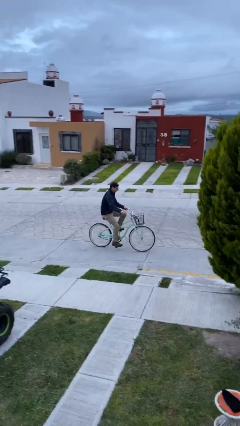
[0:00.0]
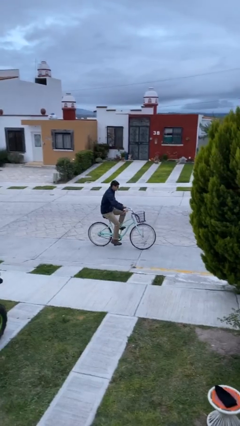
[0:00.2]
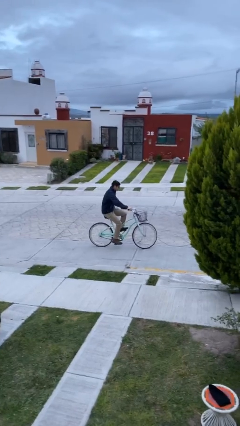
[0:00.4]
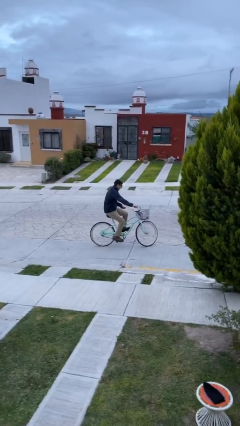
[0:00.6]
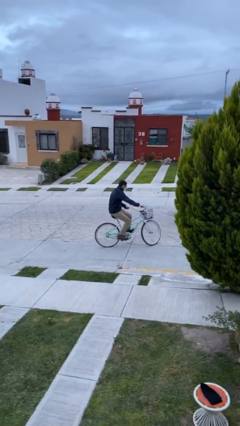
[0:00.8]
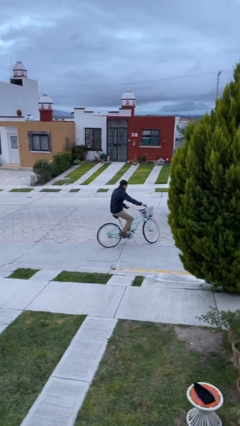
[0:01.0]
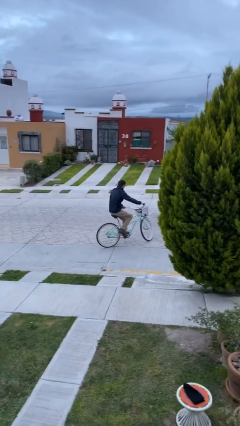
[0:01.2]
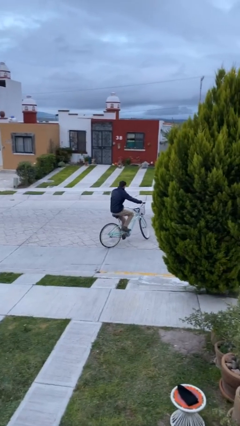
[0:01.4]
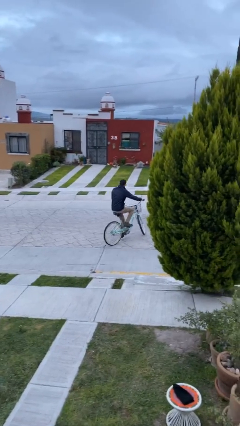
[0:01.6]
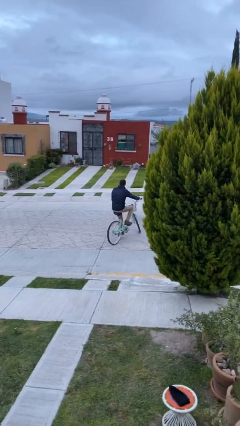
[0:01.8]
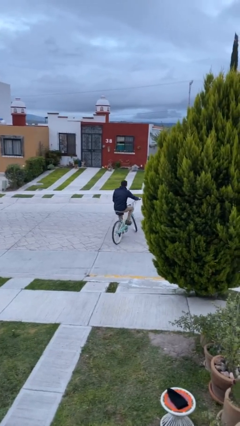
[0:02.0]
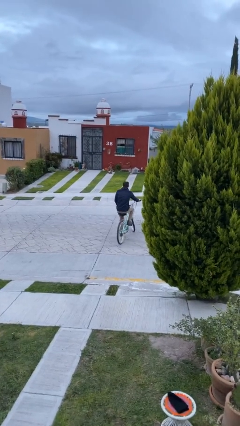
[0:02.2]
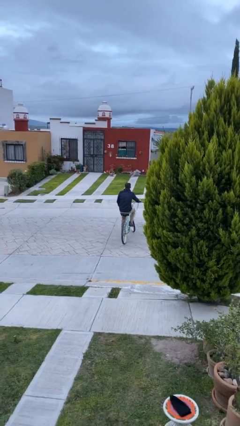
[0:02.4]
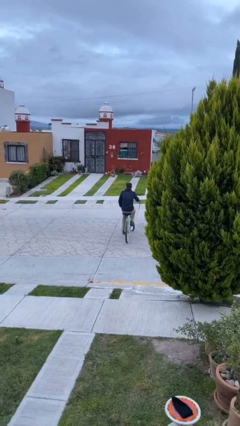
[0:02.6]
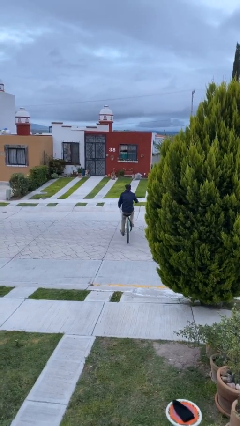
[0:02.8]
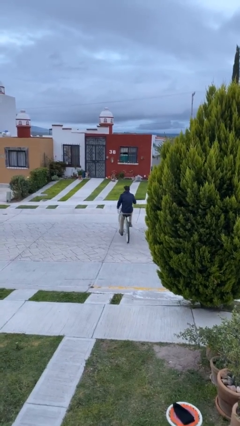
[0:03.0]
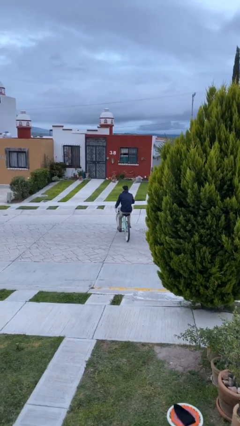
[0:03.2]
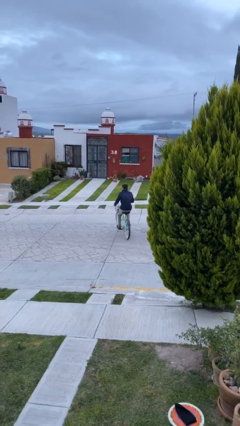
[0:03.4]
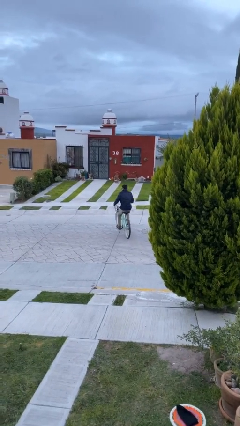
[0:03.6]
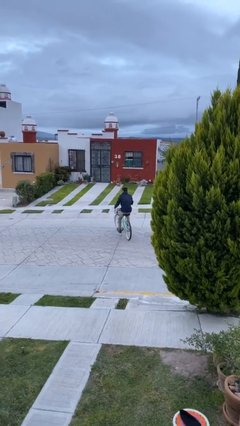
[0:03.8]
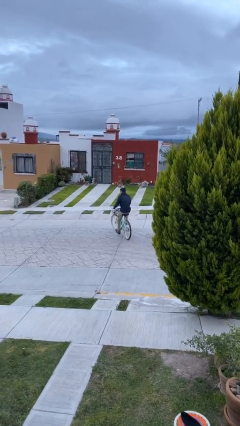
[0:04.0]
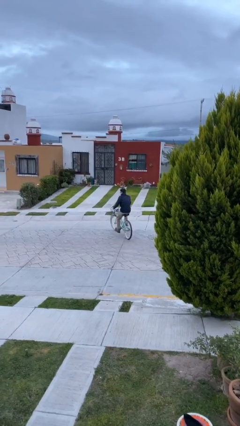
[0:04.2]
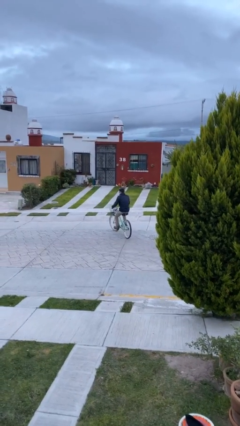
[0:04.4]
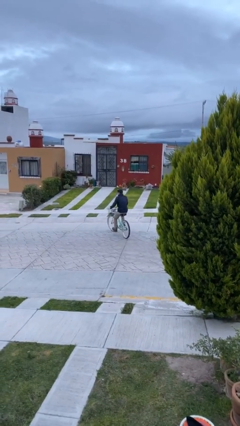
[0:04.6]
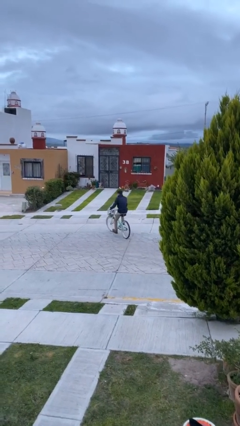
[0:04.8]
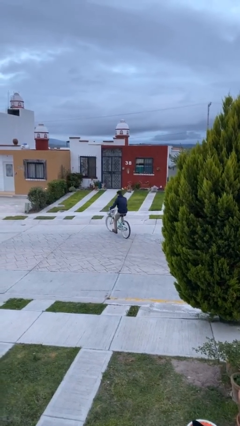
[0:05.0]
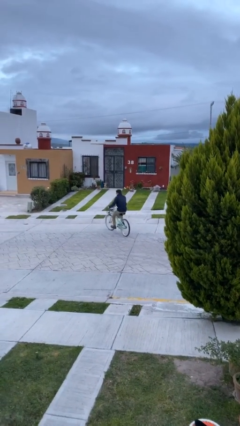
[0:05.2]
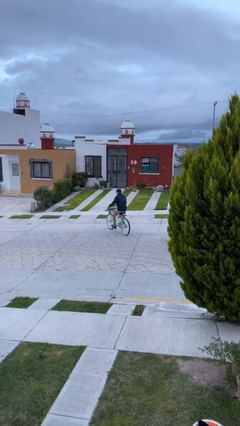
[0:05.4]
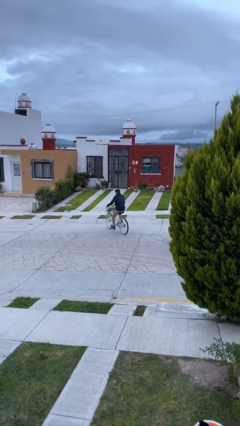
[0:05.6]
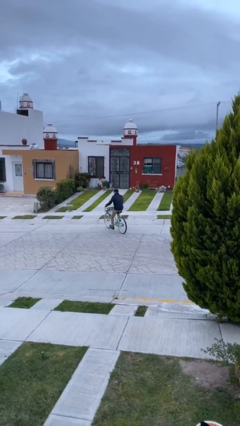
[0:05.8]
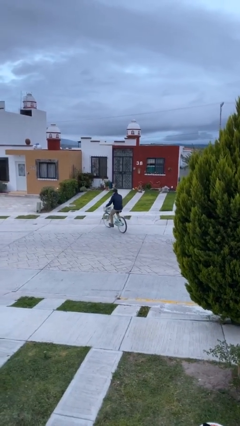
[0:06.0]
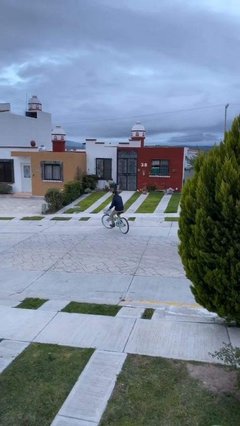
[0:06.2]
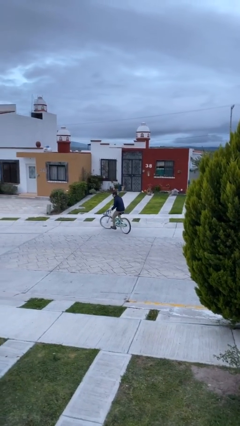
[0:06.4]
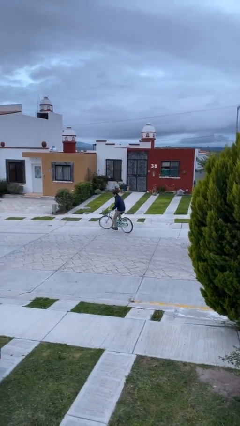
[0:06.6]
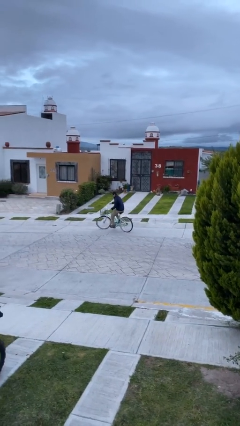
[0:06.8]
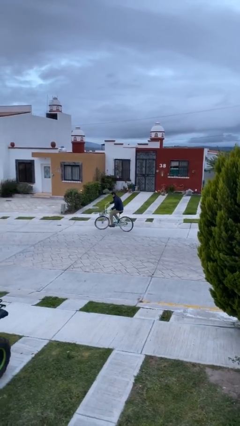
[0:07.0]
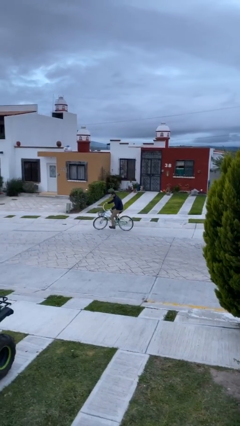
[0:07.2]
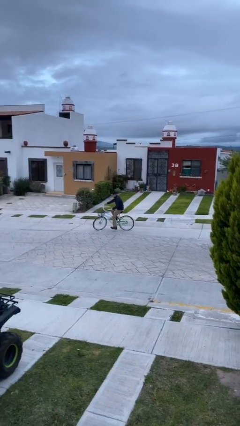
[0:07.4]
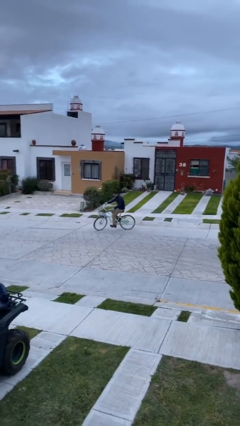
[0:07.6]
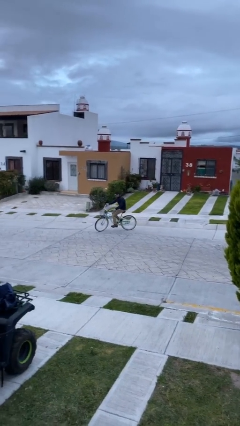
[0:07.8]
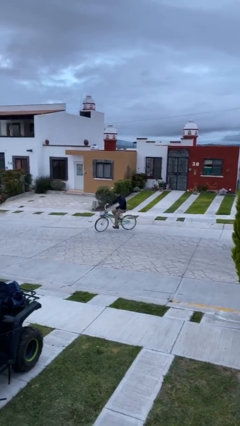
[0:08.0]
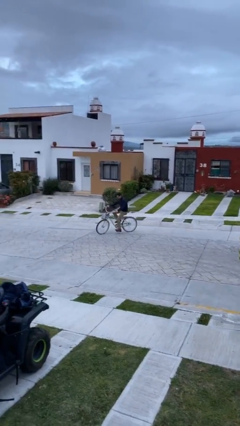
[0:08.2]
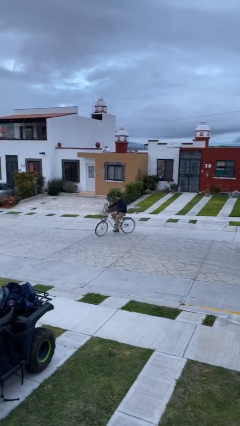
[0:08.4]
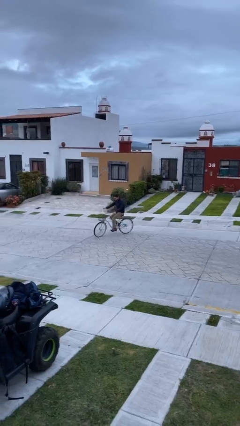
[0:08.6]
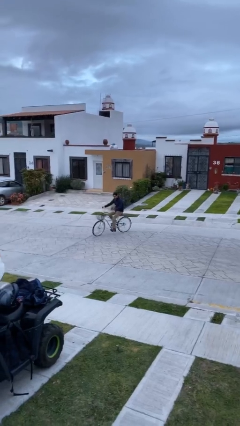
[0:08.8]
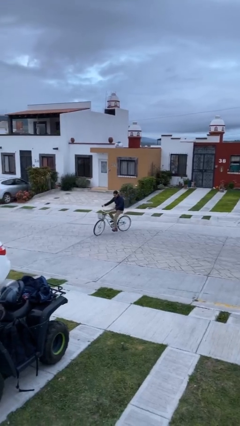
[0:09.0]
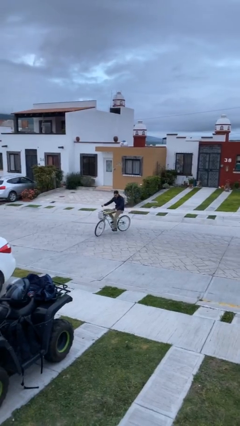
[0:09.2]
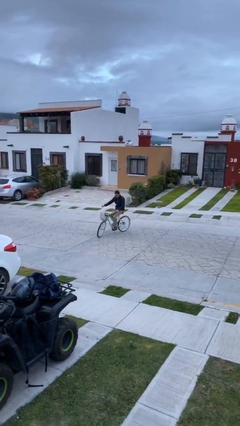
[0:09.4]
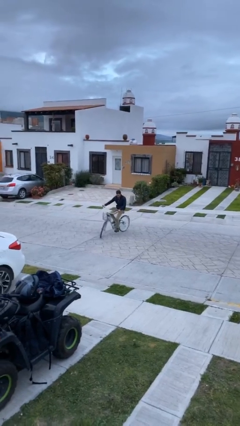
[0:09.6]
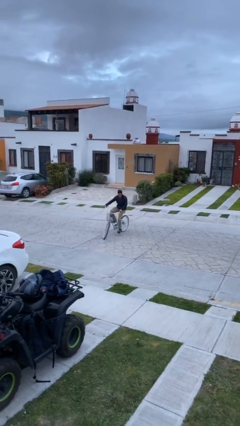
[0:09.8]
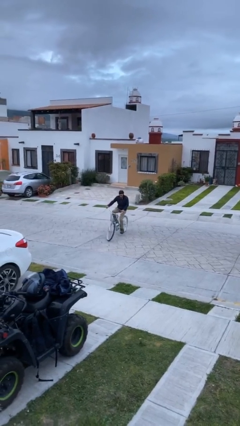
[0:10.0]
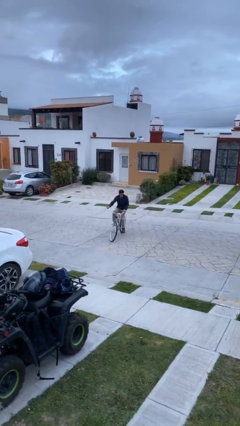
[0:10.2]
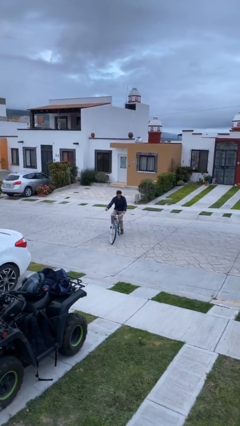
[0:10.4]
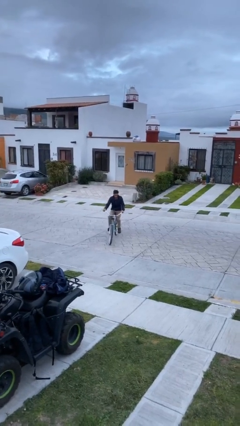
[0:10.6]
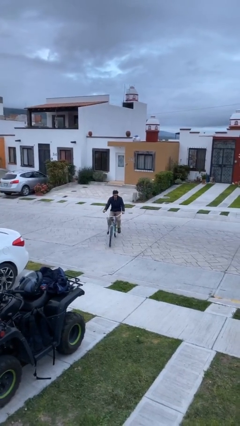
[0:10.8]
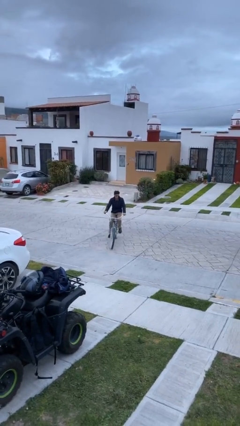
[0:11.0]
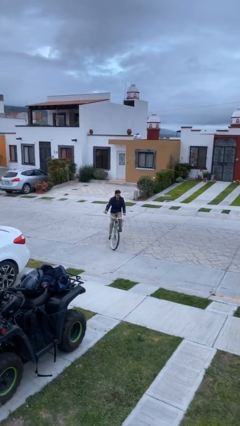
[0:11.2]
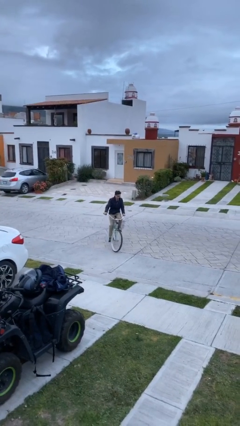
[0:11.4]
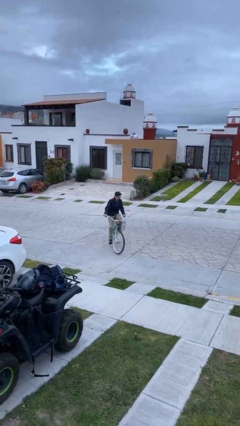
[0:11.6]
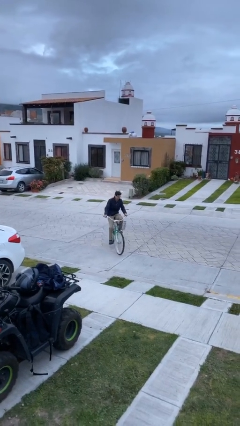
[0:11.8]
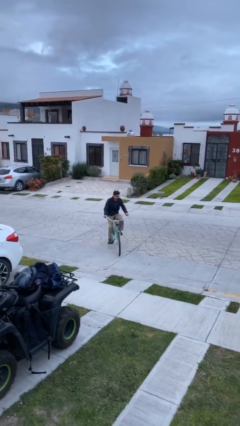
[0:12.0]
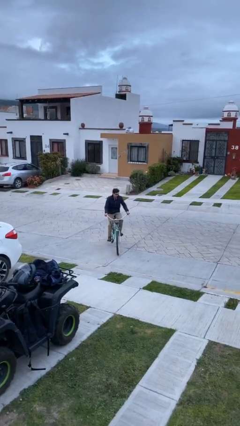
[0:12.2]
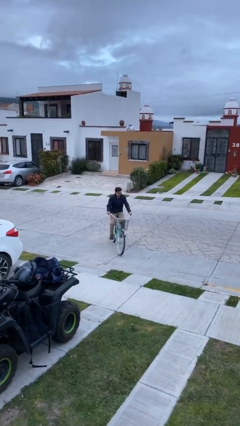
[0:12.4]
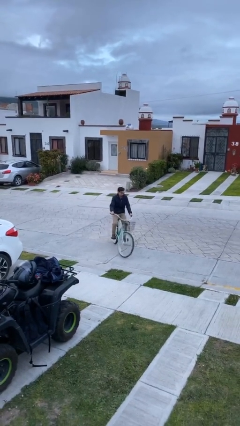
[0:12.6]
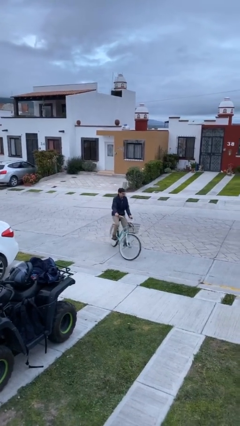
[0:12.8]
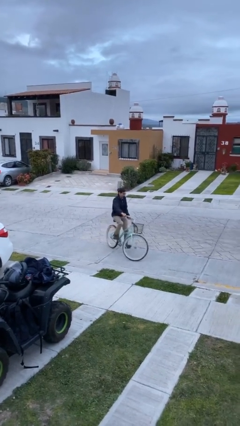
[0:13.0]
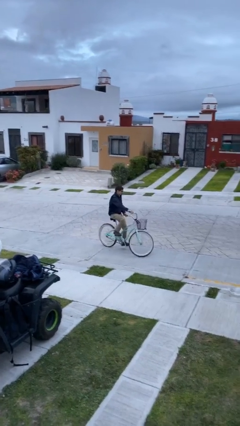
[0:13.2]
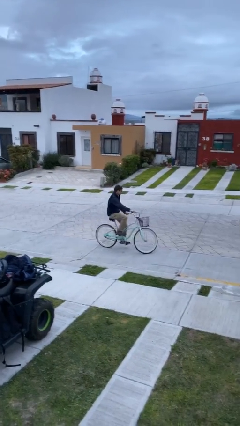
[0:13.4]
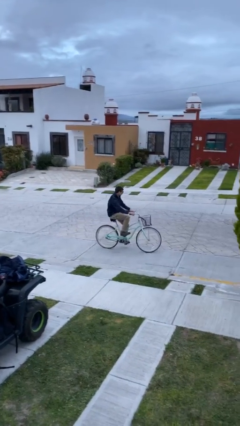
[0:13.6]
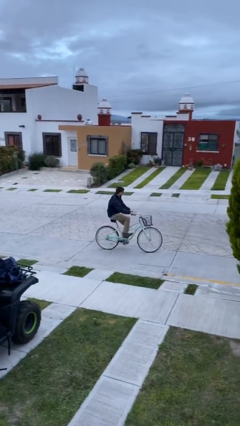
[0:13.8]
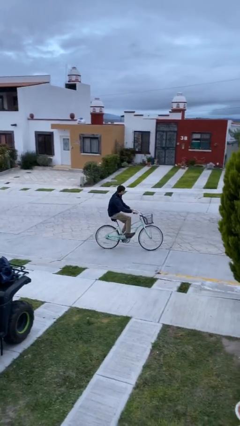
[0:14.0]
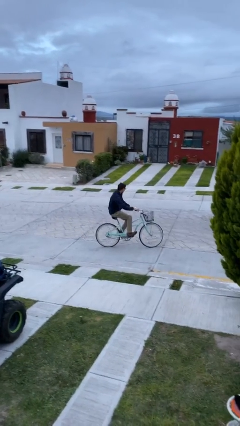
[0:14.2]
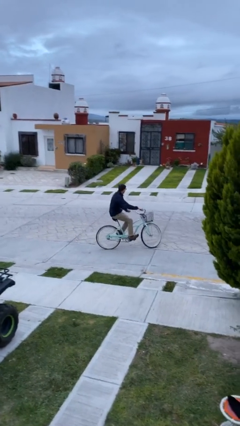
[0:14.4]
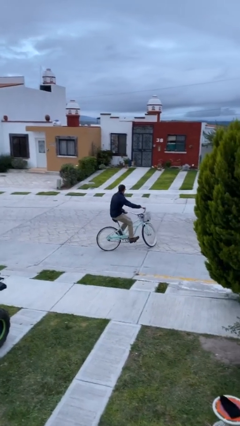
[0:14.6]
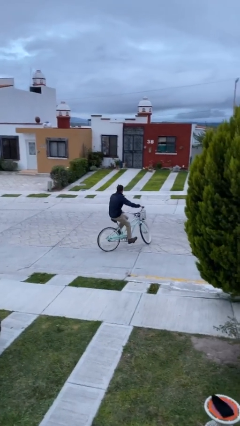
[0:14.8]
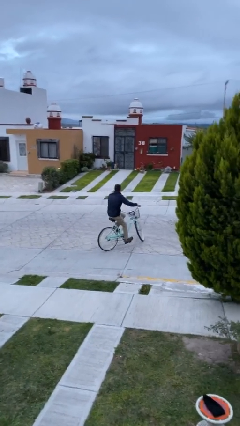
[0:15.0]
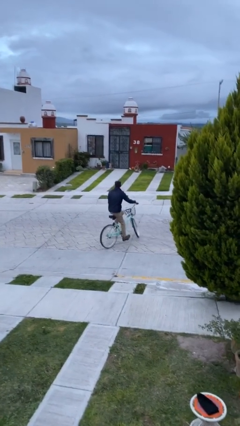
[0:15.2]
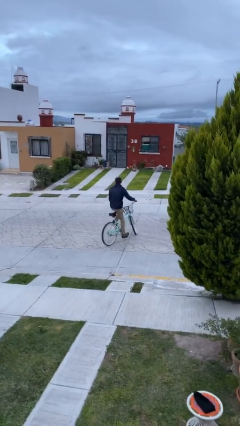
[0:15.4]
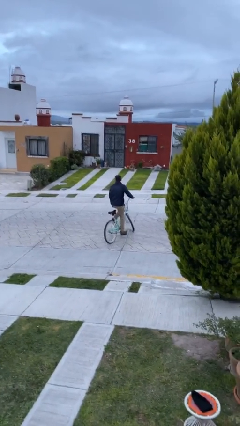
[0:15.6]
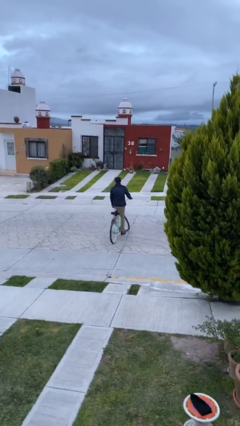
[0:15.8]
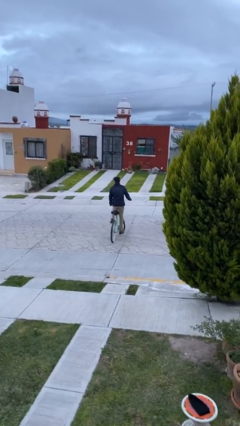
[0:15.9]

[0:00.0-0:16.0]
person rides bicycle

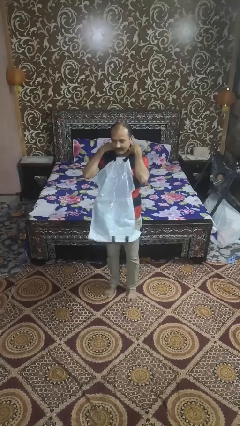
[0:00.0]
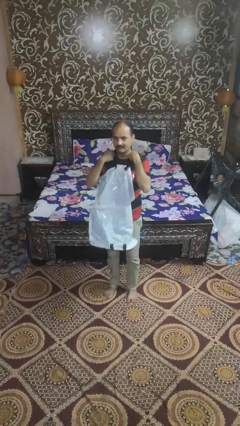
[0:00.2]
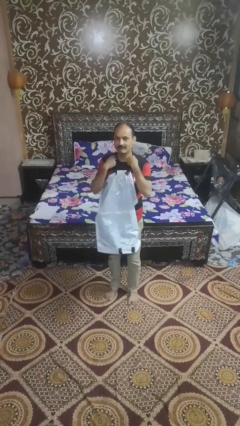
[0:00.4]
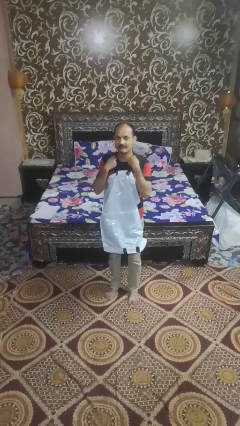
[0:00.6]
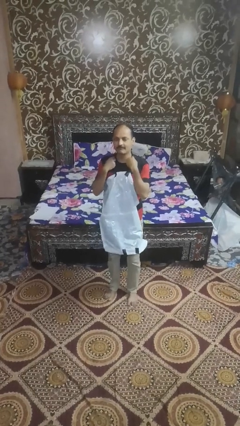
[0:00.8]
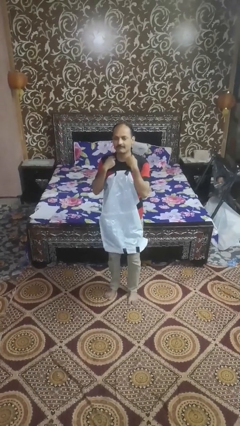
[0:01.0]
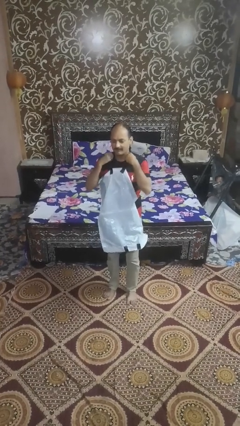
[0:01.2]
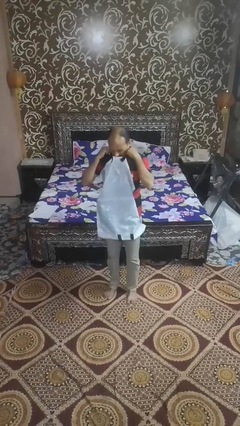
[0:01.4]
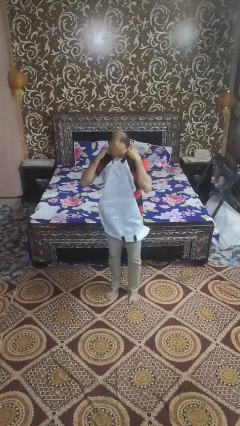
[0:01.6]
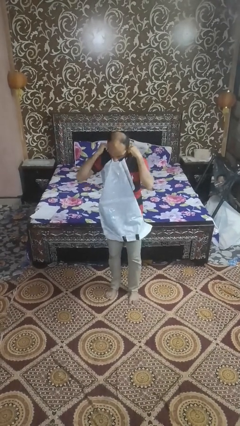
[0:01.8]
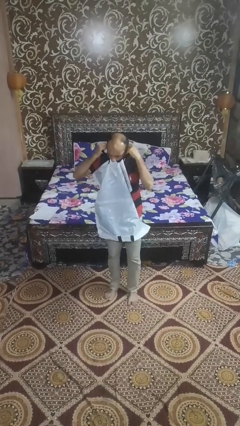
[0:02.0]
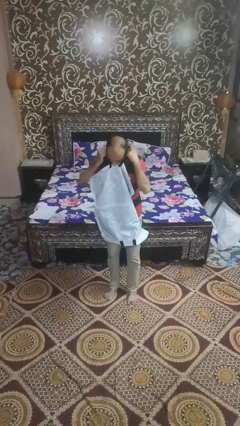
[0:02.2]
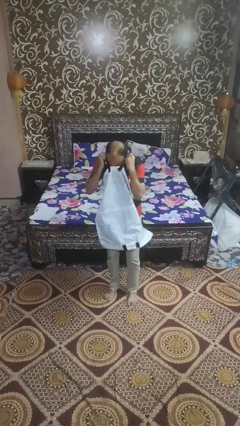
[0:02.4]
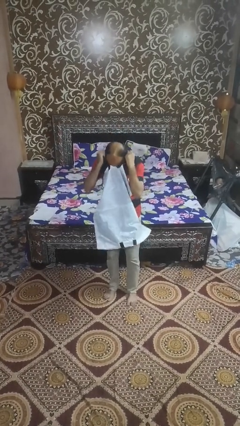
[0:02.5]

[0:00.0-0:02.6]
person tears paper
